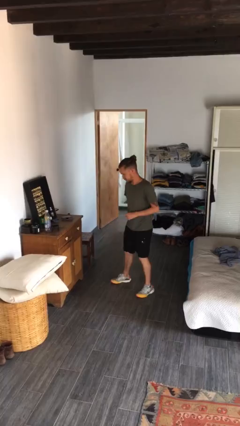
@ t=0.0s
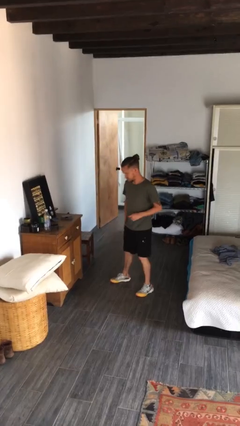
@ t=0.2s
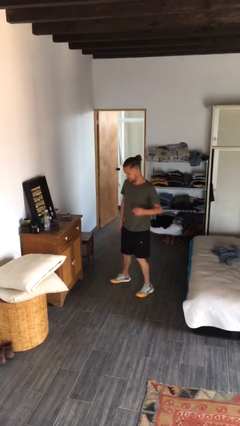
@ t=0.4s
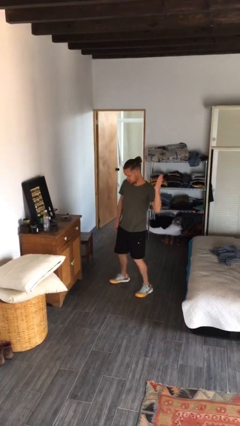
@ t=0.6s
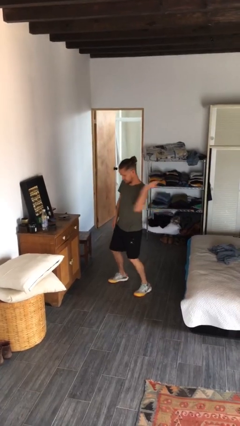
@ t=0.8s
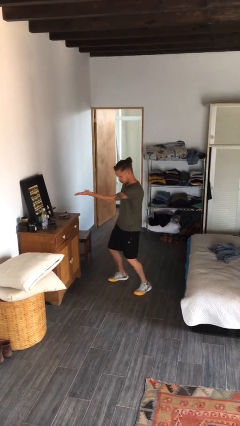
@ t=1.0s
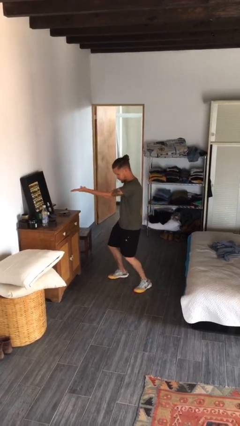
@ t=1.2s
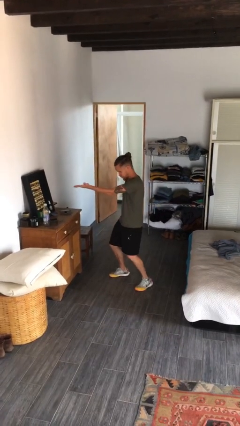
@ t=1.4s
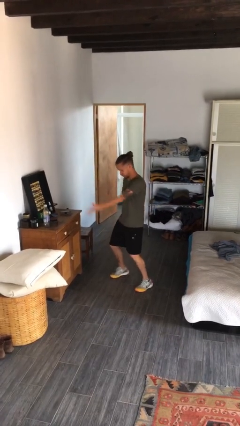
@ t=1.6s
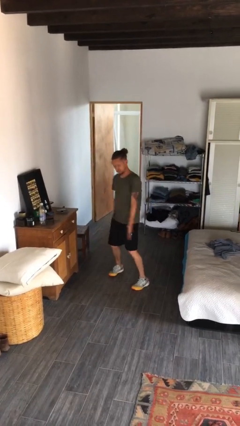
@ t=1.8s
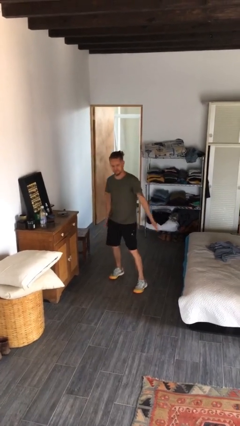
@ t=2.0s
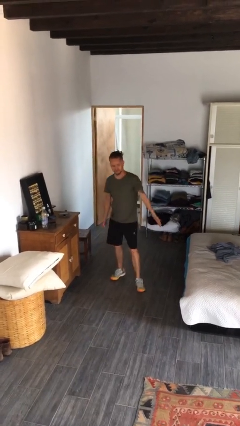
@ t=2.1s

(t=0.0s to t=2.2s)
person karate chop

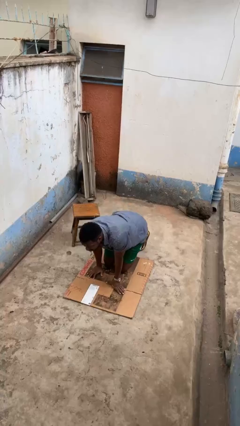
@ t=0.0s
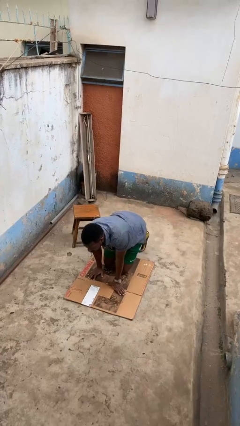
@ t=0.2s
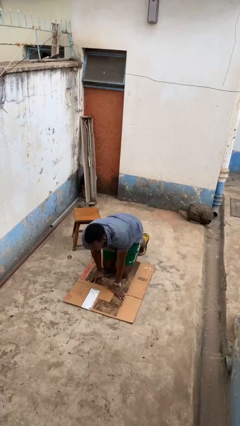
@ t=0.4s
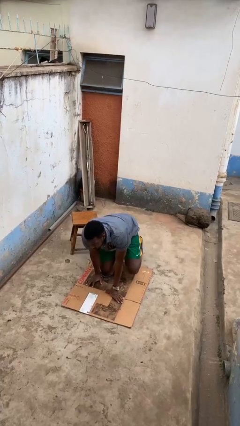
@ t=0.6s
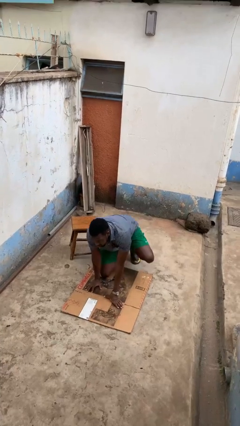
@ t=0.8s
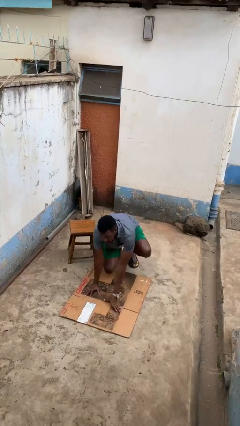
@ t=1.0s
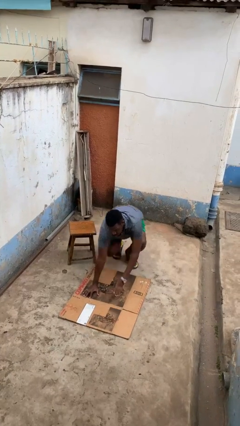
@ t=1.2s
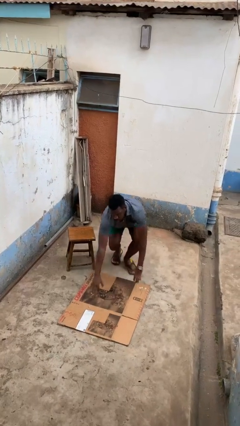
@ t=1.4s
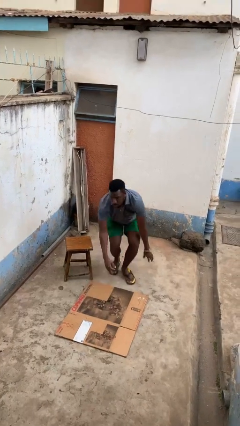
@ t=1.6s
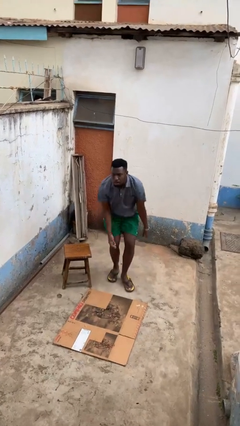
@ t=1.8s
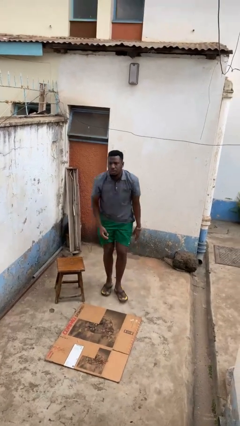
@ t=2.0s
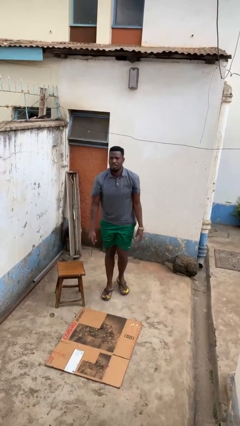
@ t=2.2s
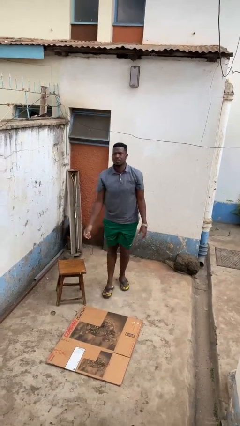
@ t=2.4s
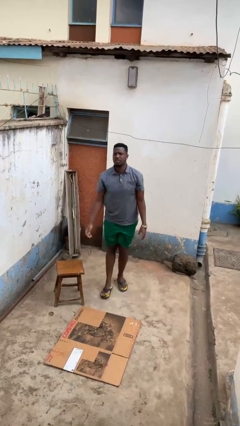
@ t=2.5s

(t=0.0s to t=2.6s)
person stands up from floor

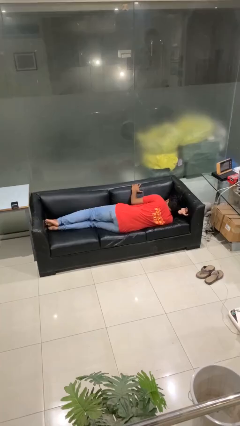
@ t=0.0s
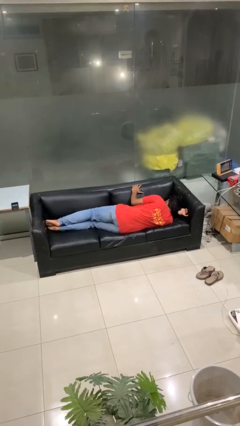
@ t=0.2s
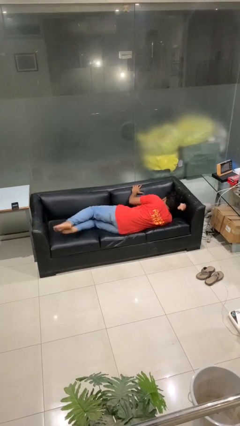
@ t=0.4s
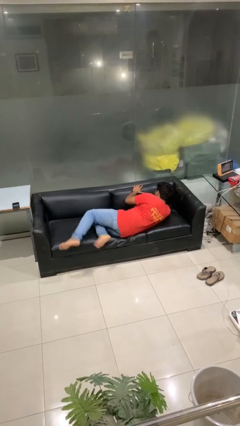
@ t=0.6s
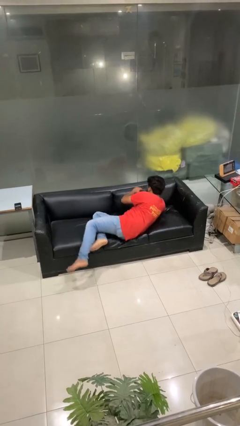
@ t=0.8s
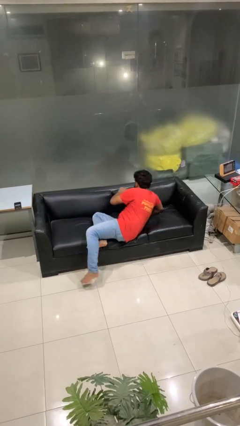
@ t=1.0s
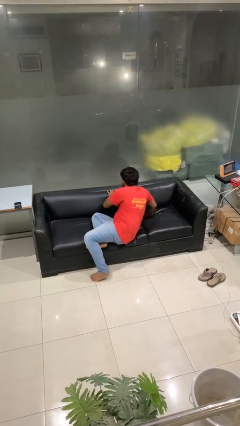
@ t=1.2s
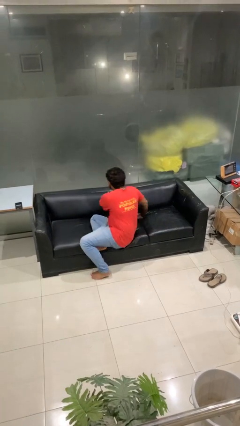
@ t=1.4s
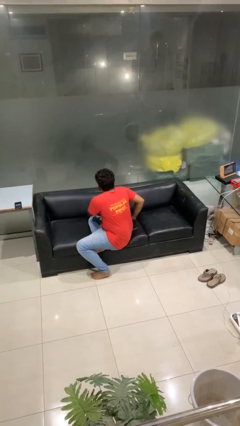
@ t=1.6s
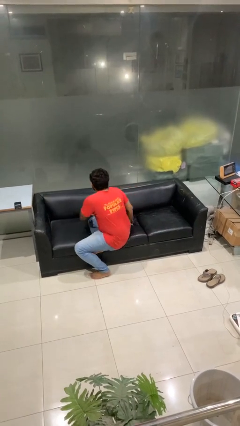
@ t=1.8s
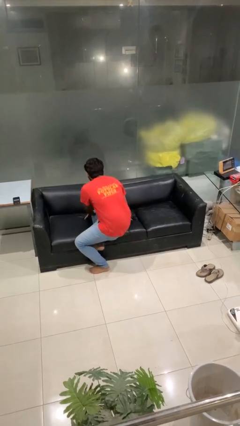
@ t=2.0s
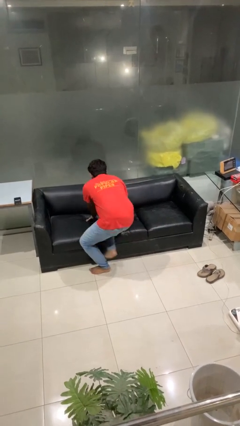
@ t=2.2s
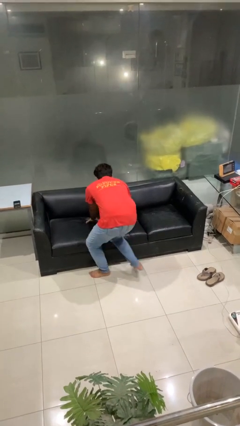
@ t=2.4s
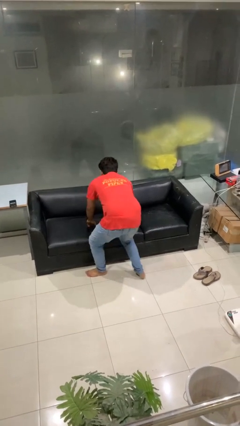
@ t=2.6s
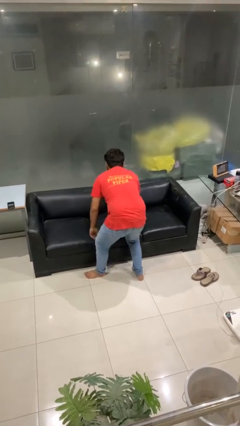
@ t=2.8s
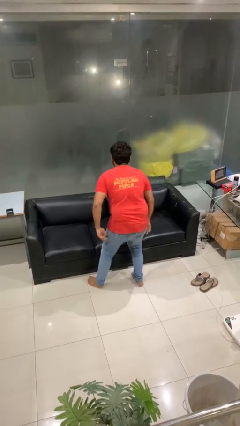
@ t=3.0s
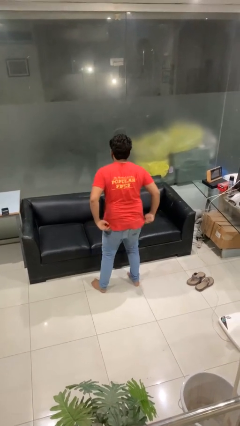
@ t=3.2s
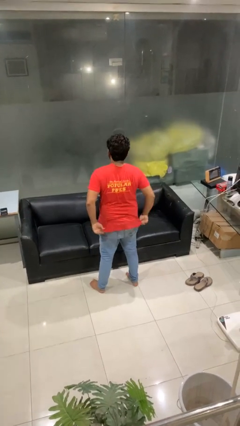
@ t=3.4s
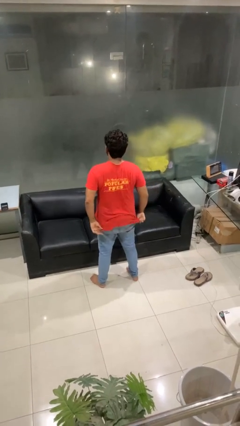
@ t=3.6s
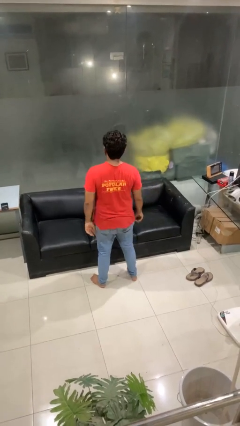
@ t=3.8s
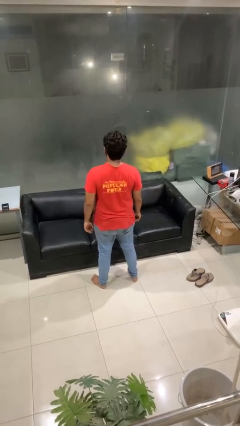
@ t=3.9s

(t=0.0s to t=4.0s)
person stands up

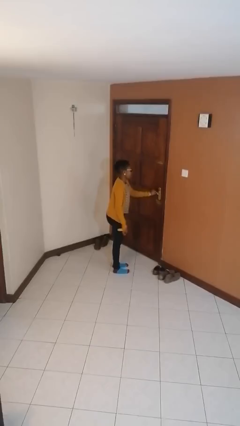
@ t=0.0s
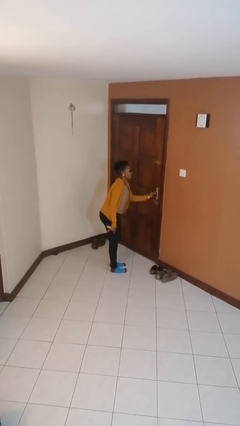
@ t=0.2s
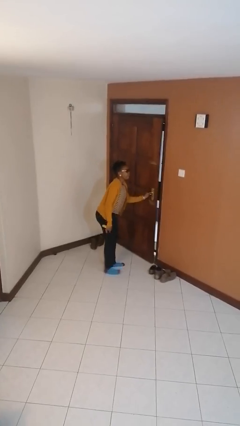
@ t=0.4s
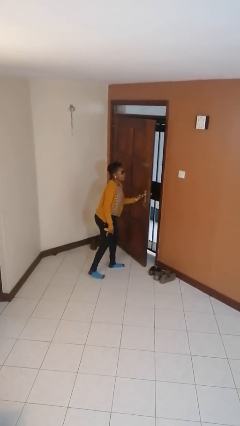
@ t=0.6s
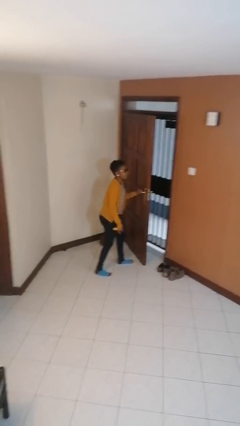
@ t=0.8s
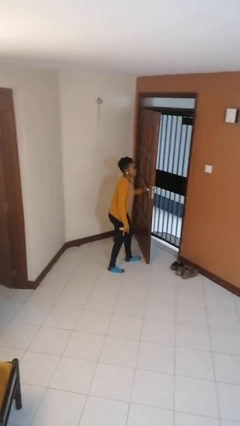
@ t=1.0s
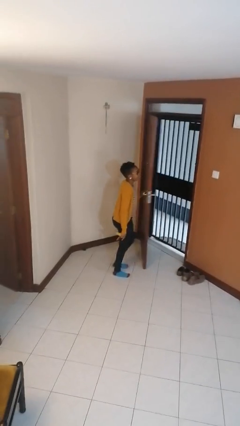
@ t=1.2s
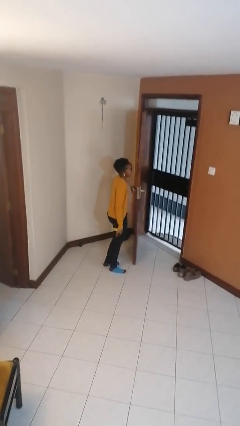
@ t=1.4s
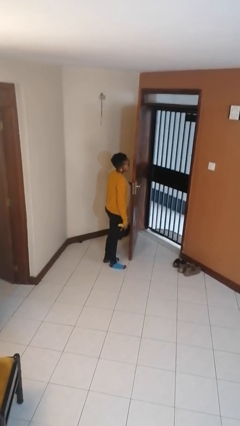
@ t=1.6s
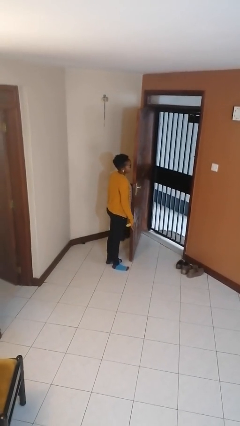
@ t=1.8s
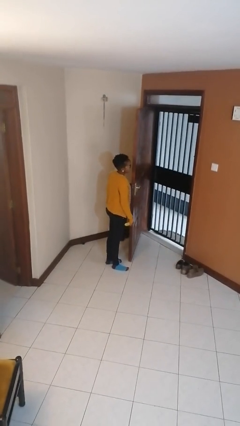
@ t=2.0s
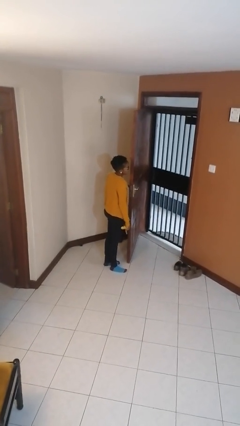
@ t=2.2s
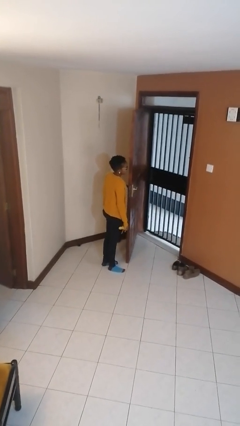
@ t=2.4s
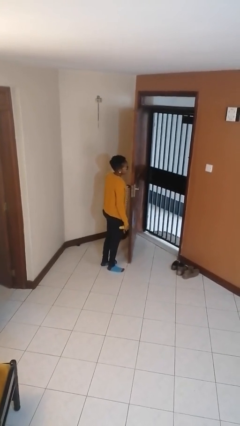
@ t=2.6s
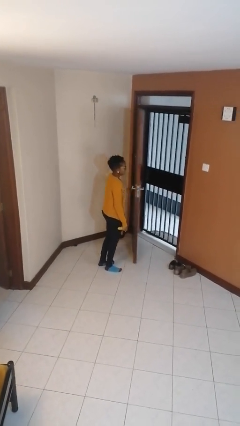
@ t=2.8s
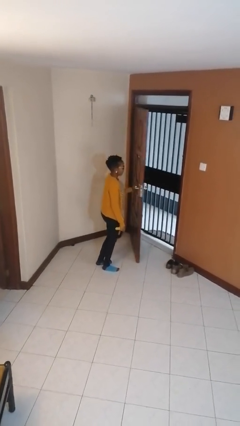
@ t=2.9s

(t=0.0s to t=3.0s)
person opens facility door

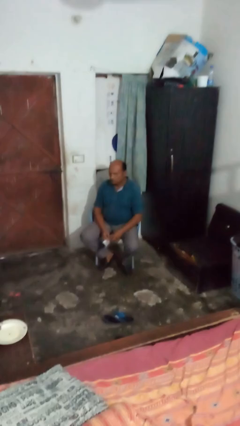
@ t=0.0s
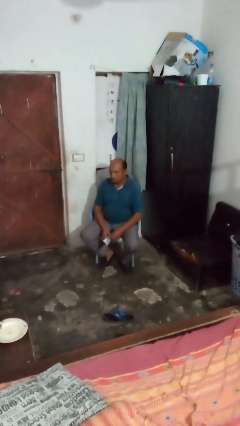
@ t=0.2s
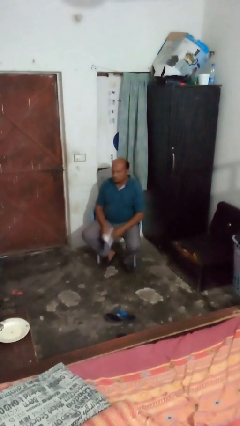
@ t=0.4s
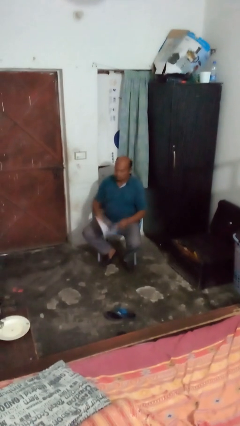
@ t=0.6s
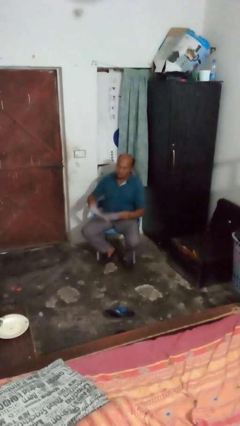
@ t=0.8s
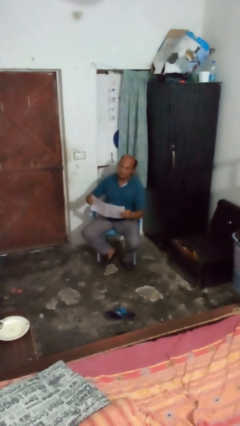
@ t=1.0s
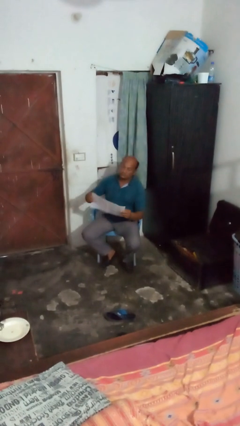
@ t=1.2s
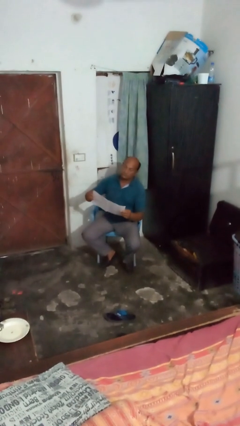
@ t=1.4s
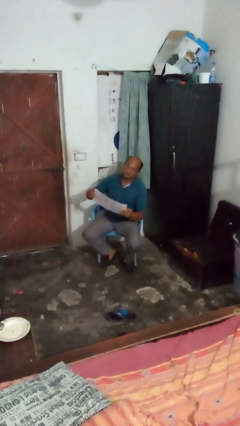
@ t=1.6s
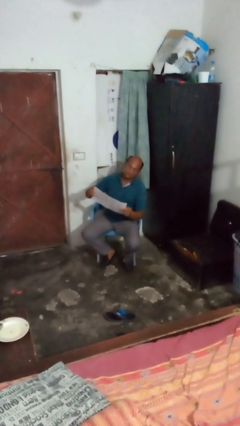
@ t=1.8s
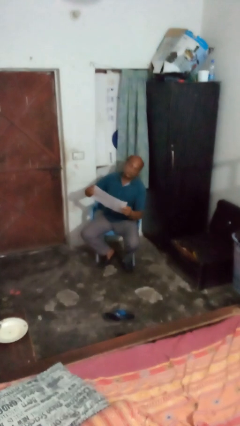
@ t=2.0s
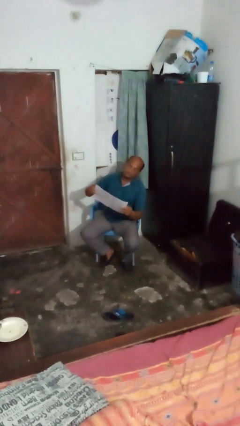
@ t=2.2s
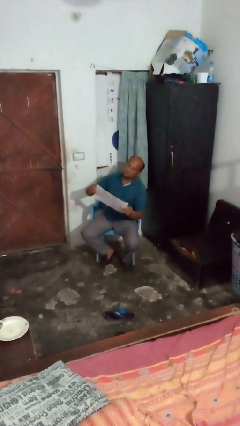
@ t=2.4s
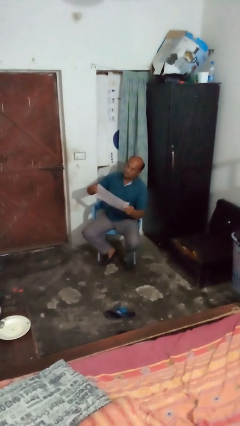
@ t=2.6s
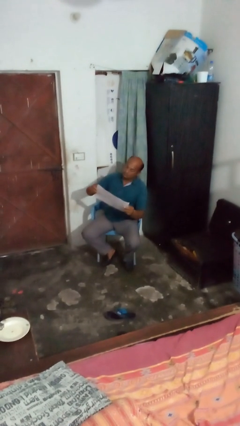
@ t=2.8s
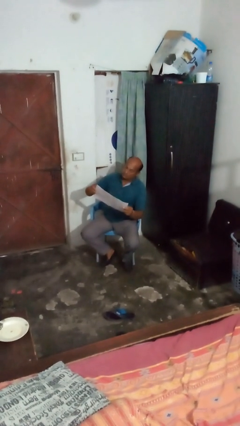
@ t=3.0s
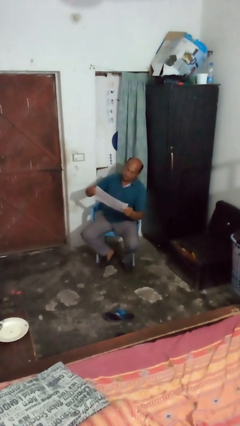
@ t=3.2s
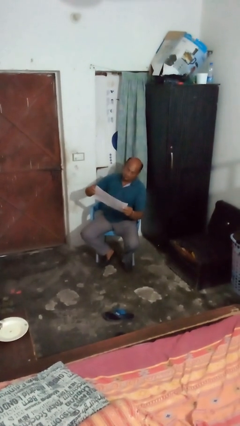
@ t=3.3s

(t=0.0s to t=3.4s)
person reads newspaper

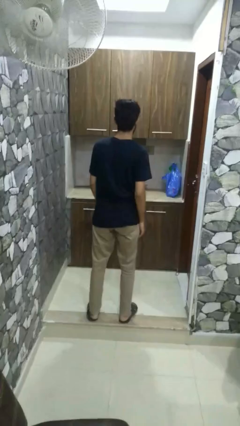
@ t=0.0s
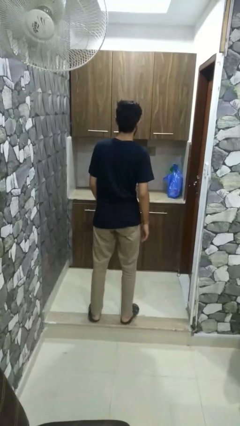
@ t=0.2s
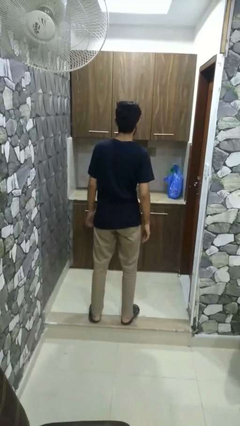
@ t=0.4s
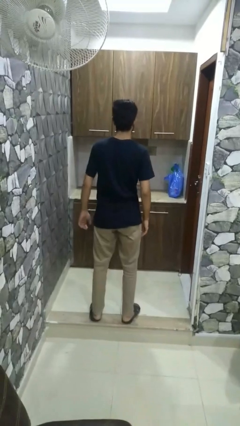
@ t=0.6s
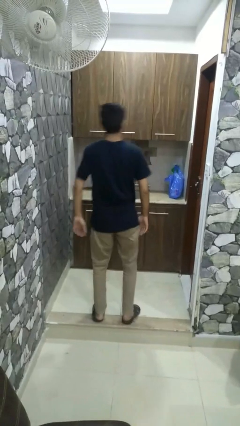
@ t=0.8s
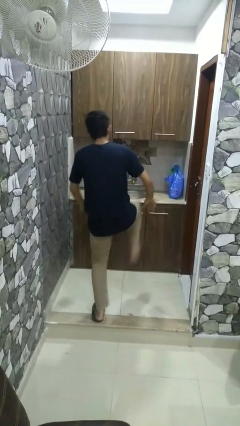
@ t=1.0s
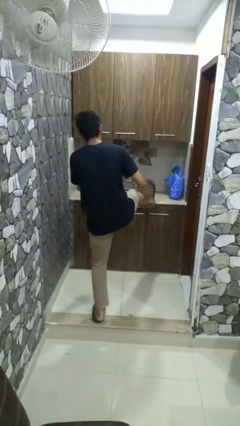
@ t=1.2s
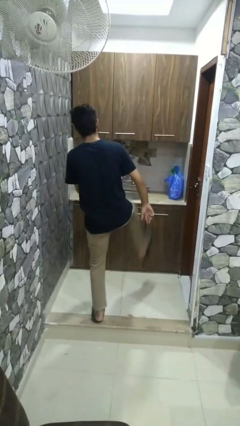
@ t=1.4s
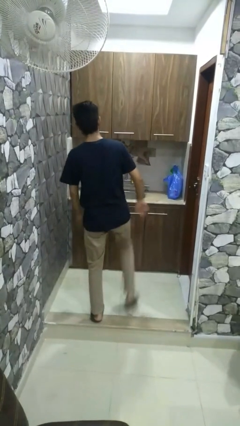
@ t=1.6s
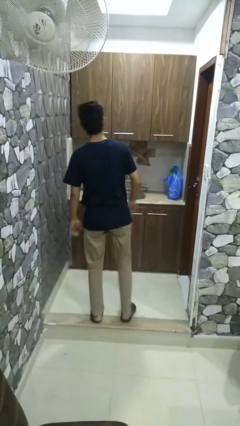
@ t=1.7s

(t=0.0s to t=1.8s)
person karate kicks
